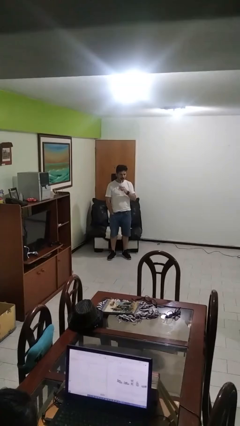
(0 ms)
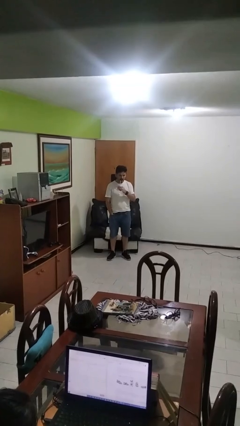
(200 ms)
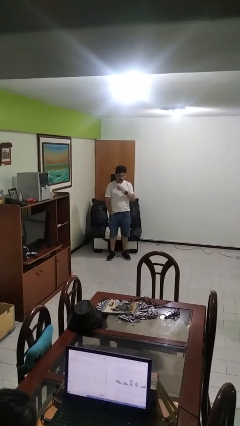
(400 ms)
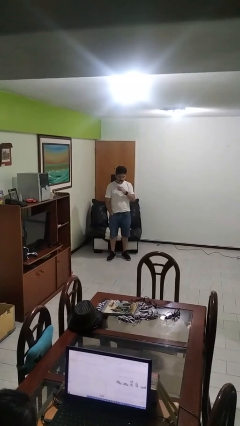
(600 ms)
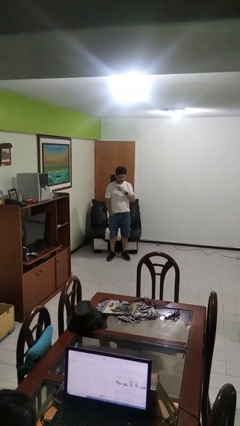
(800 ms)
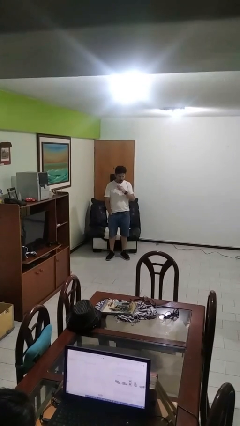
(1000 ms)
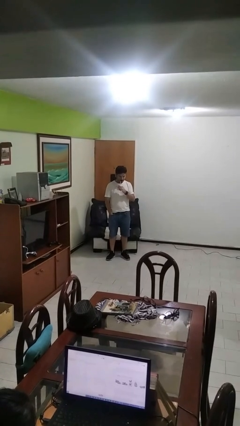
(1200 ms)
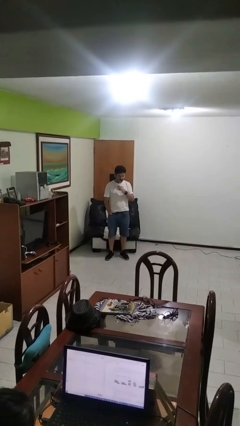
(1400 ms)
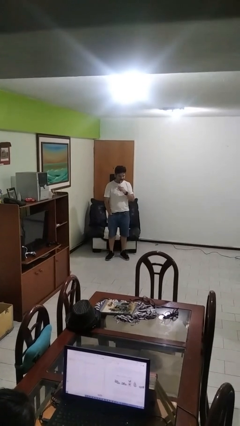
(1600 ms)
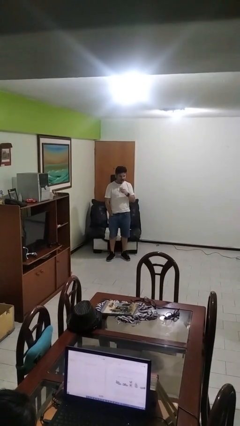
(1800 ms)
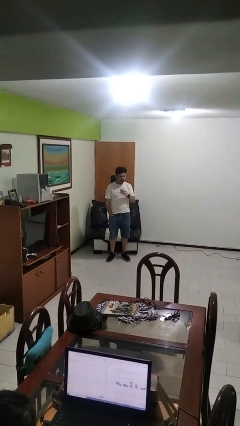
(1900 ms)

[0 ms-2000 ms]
person drinks from straw

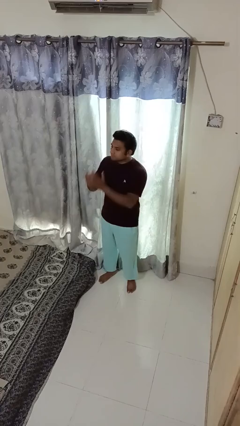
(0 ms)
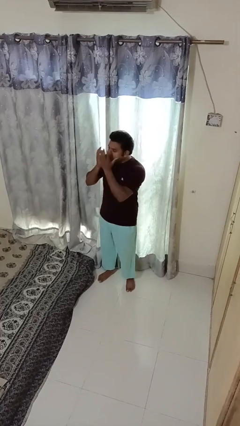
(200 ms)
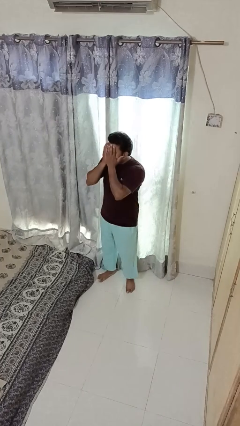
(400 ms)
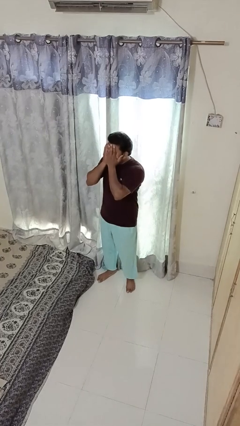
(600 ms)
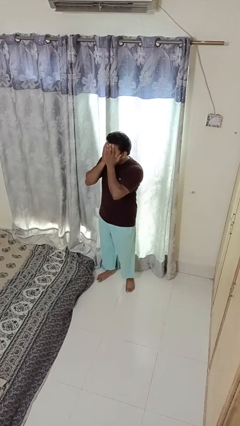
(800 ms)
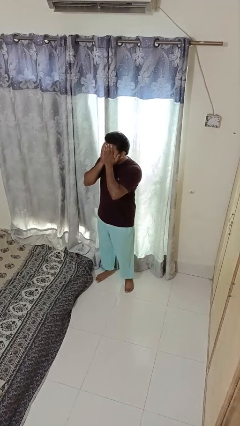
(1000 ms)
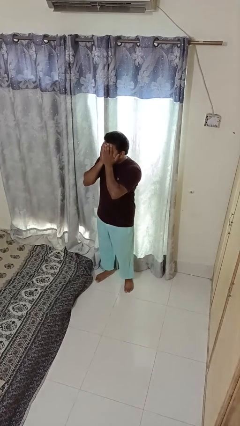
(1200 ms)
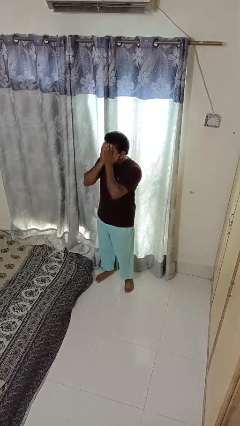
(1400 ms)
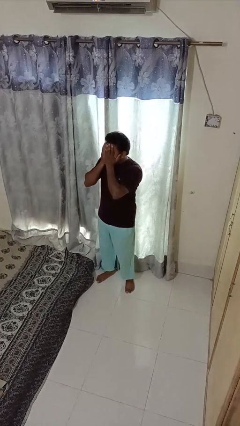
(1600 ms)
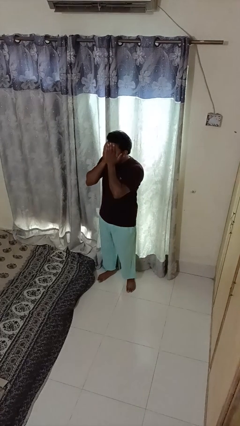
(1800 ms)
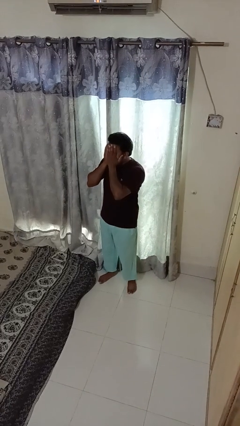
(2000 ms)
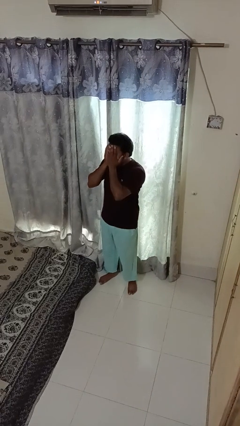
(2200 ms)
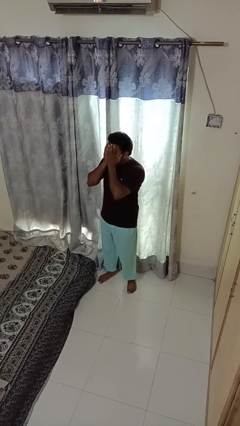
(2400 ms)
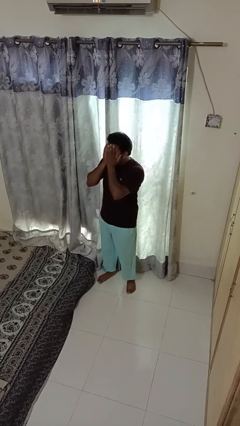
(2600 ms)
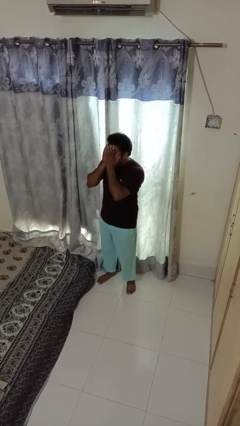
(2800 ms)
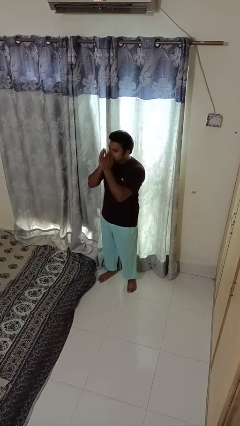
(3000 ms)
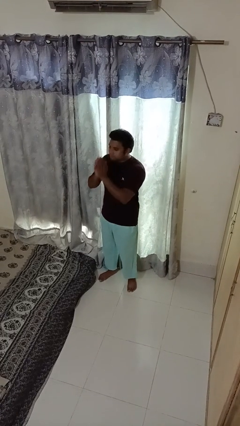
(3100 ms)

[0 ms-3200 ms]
person covers face with hands

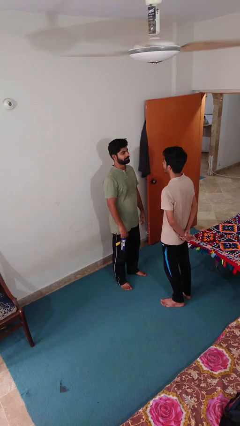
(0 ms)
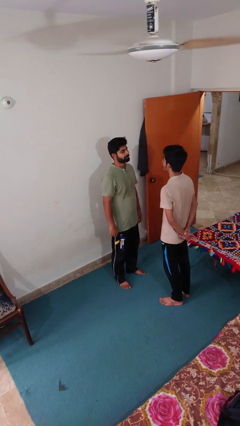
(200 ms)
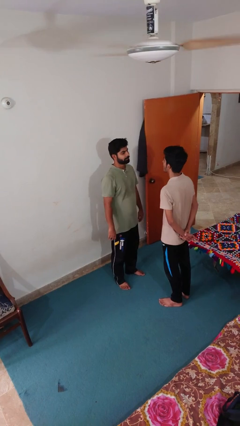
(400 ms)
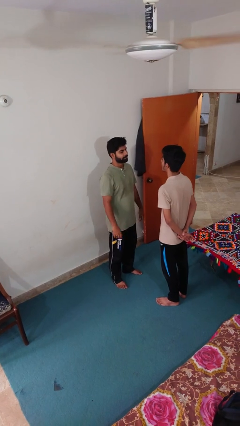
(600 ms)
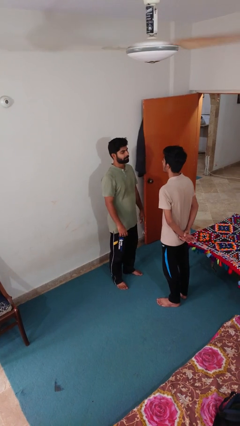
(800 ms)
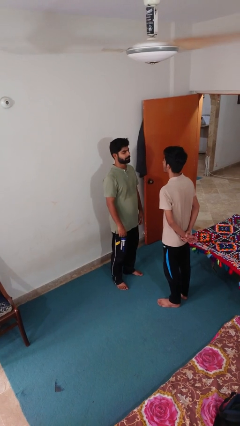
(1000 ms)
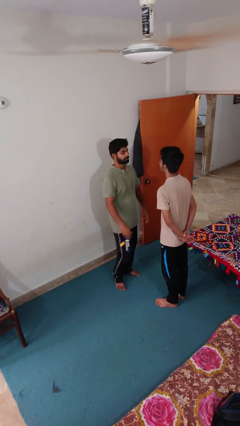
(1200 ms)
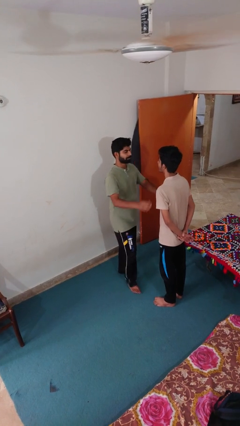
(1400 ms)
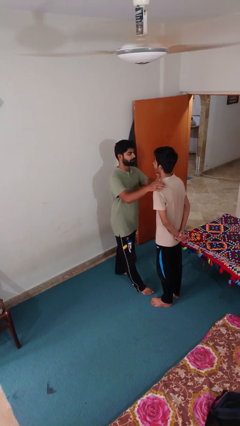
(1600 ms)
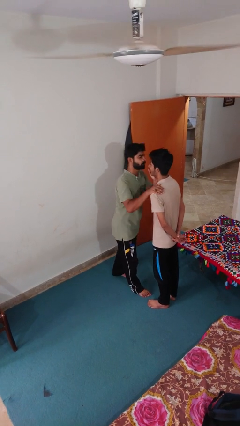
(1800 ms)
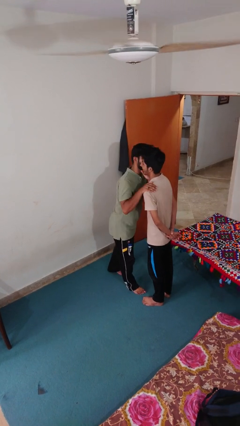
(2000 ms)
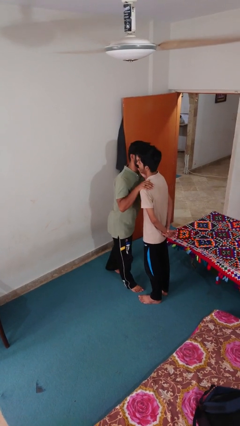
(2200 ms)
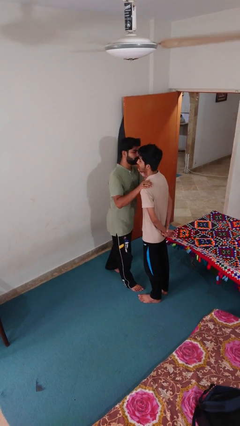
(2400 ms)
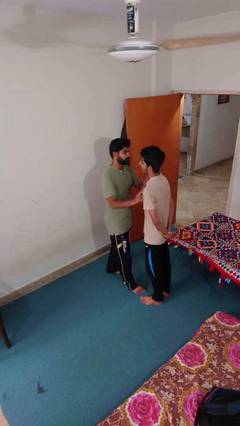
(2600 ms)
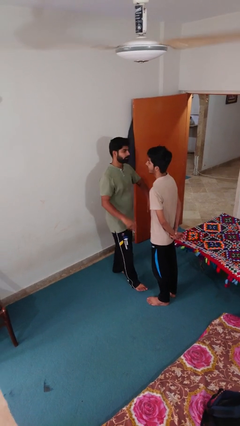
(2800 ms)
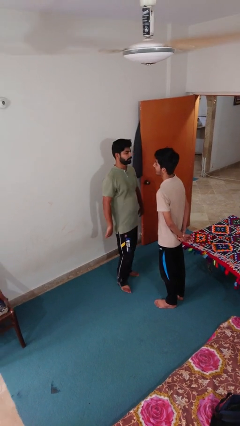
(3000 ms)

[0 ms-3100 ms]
person kisses cheek of person

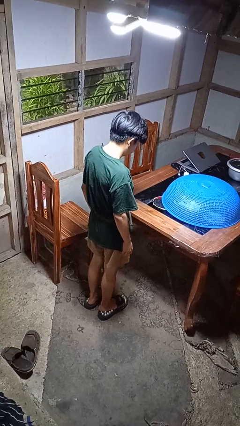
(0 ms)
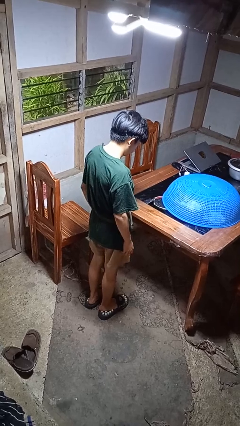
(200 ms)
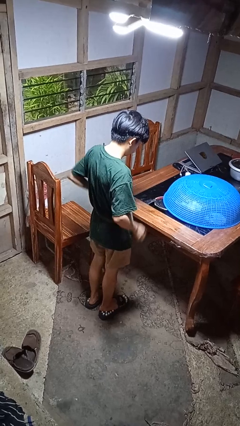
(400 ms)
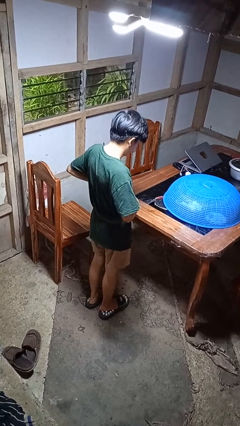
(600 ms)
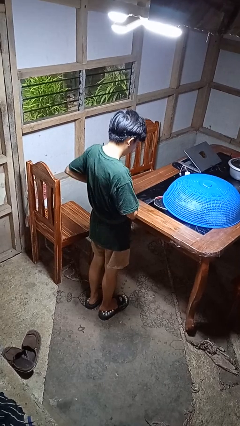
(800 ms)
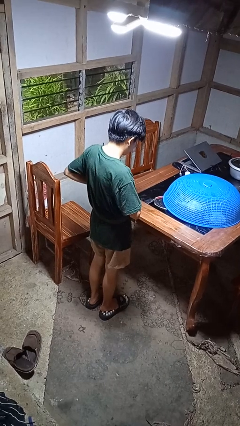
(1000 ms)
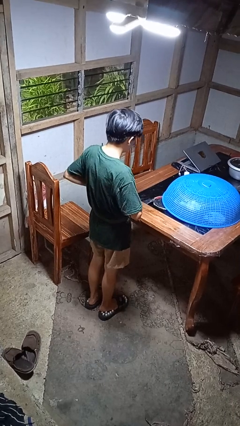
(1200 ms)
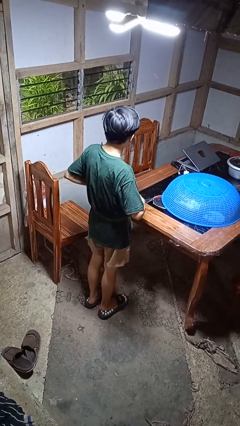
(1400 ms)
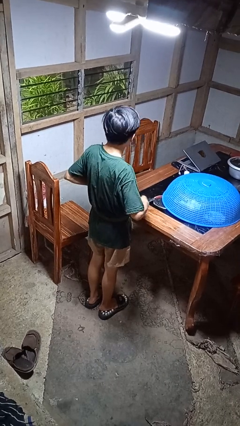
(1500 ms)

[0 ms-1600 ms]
person takes off belt

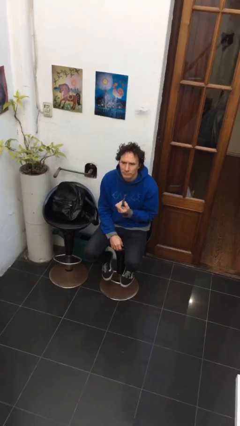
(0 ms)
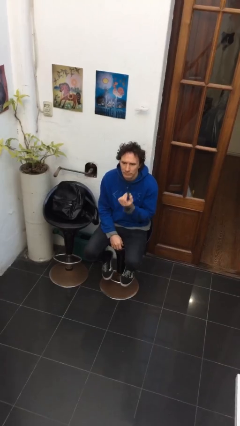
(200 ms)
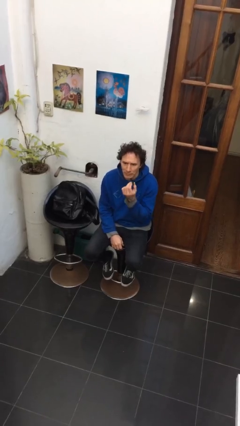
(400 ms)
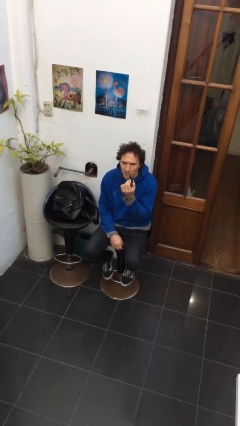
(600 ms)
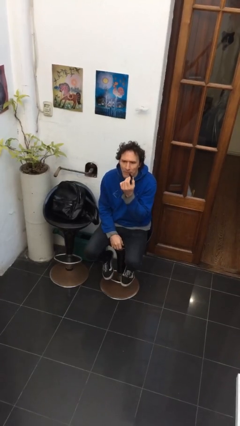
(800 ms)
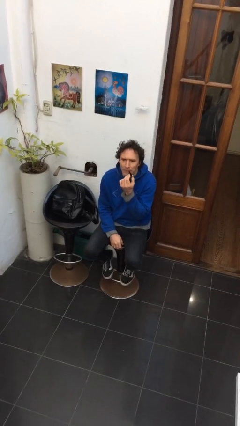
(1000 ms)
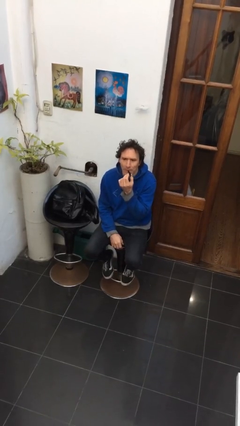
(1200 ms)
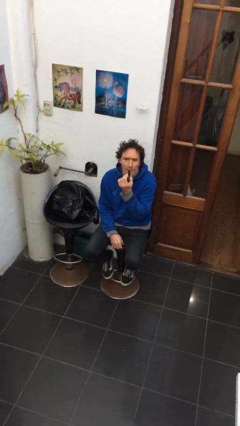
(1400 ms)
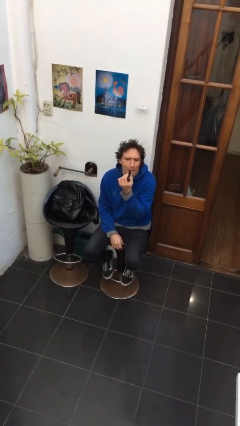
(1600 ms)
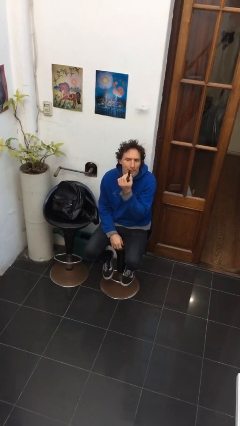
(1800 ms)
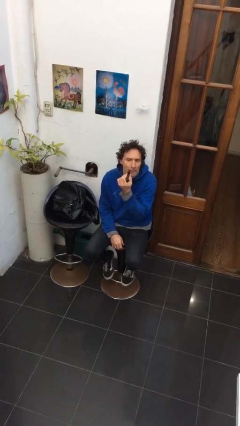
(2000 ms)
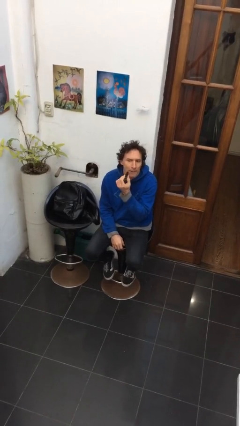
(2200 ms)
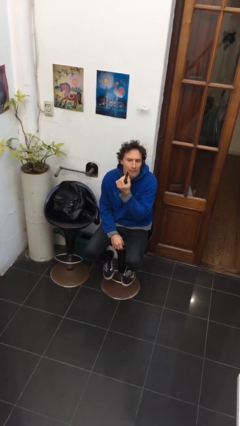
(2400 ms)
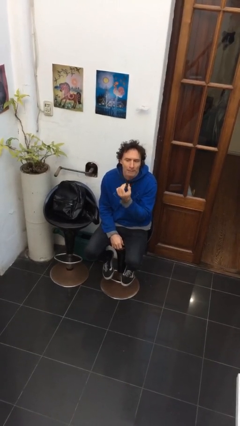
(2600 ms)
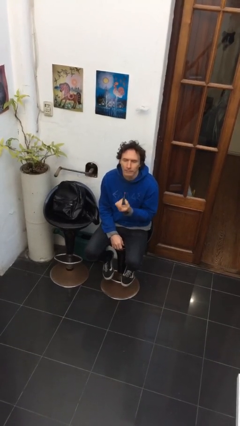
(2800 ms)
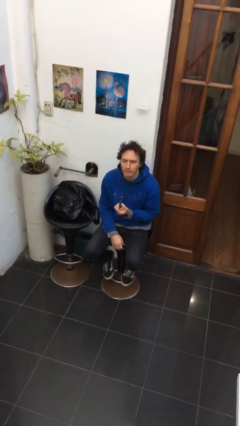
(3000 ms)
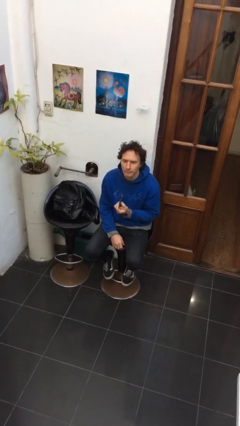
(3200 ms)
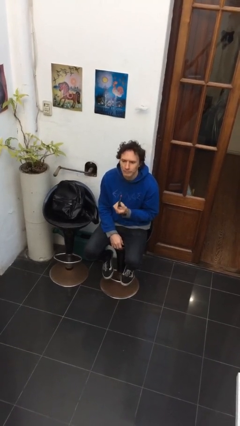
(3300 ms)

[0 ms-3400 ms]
person applies lip makeup

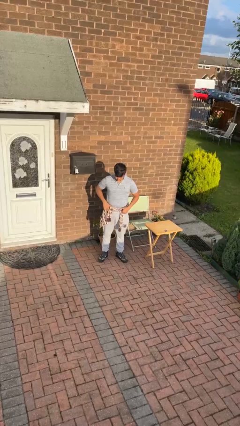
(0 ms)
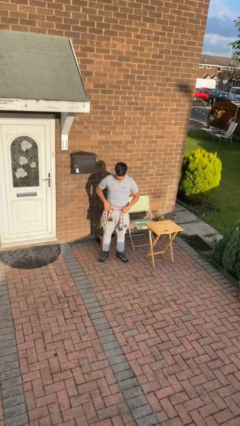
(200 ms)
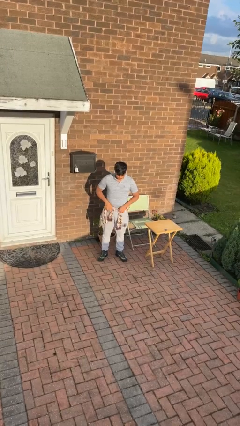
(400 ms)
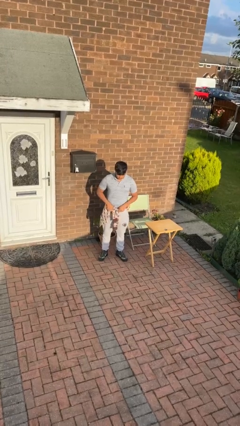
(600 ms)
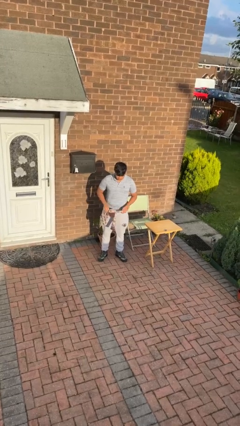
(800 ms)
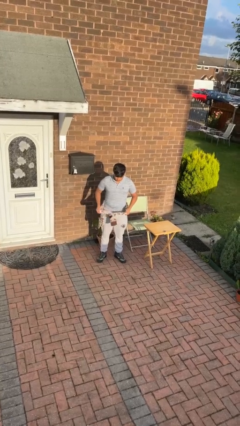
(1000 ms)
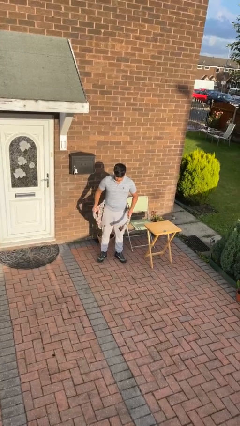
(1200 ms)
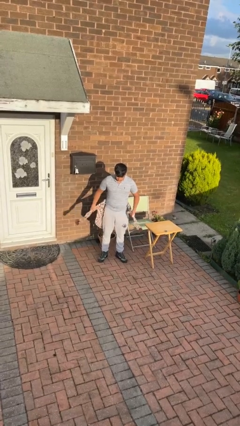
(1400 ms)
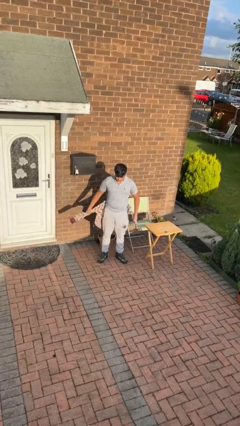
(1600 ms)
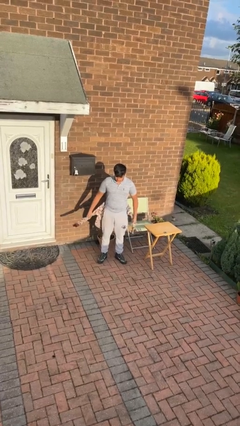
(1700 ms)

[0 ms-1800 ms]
person unties jacket around waist

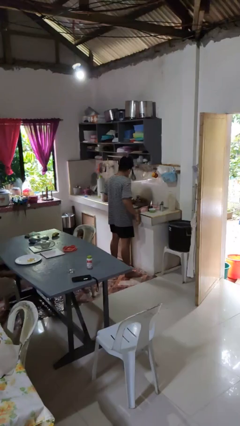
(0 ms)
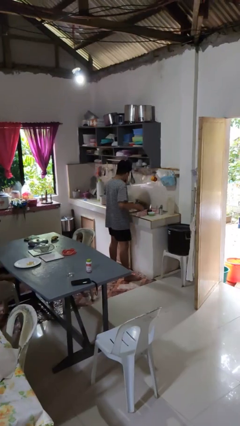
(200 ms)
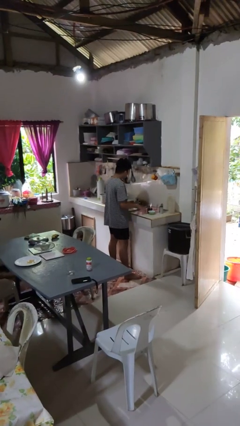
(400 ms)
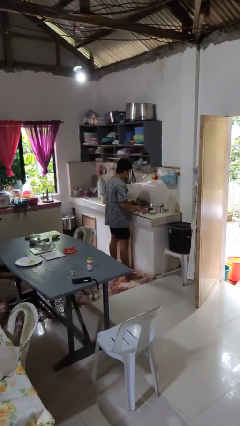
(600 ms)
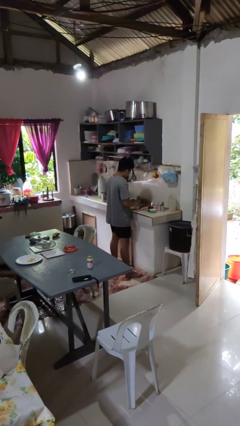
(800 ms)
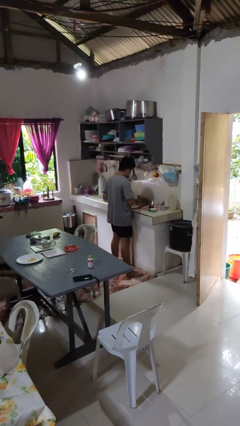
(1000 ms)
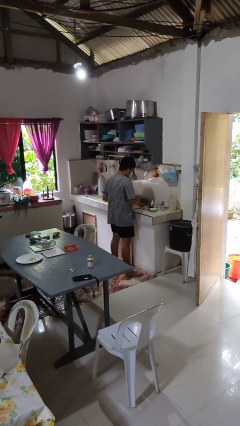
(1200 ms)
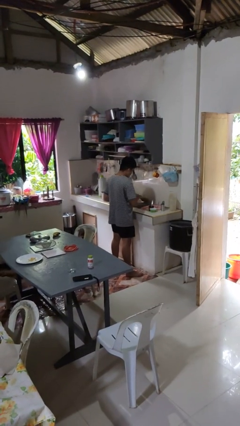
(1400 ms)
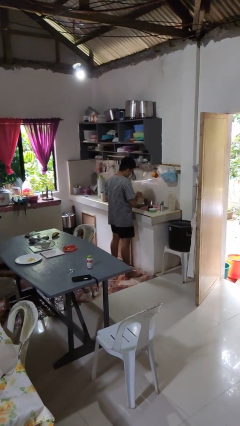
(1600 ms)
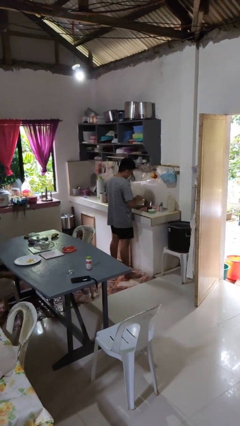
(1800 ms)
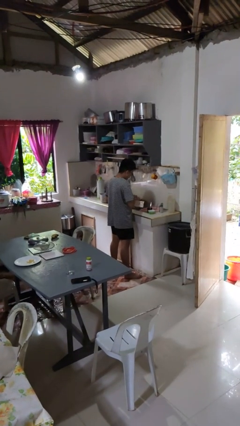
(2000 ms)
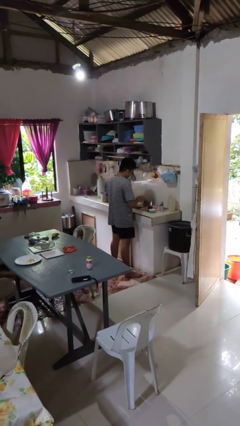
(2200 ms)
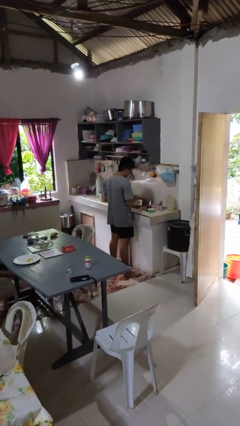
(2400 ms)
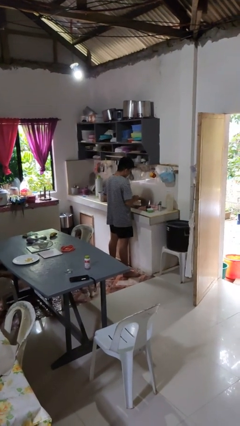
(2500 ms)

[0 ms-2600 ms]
person washes dish
